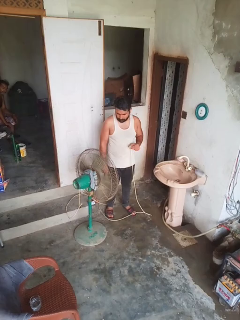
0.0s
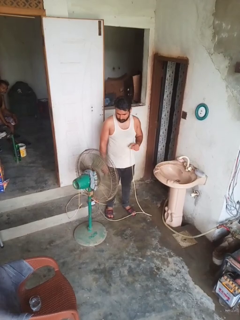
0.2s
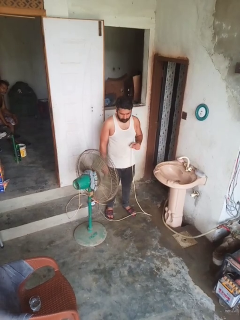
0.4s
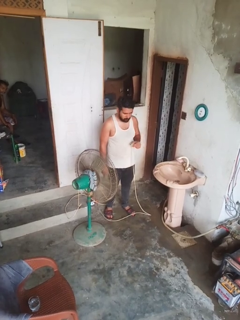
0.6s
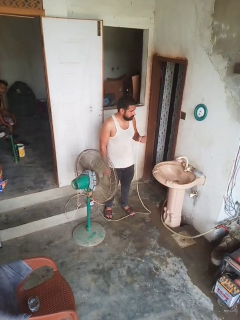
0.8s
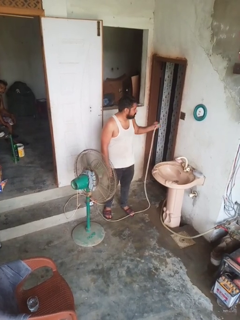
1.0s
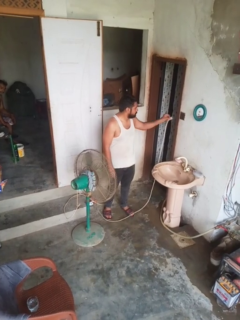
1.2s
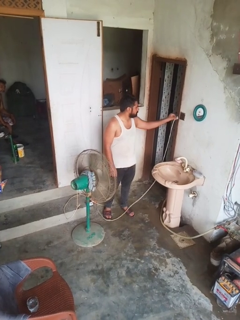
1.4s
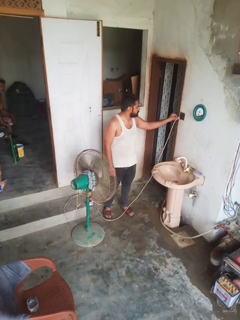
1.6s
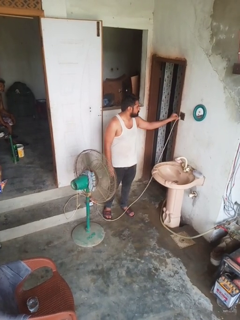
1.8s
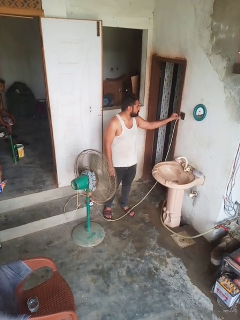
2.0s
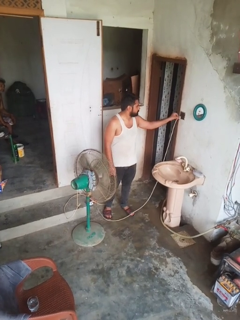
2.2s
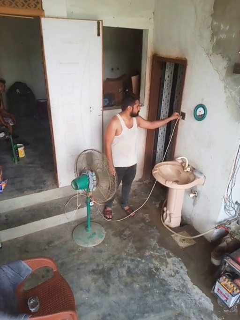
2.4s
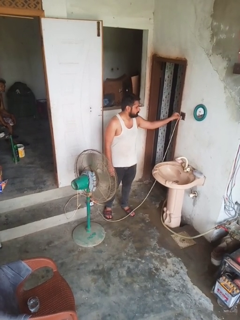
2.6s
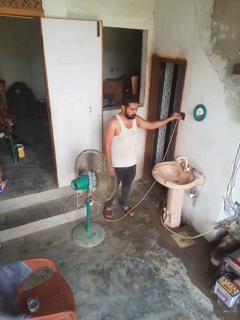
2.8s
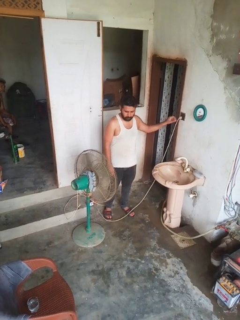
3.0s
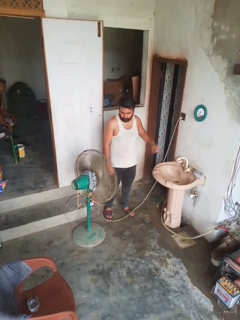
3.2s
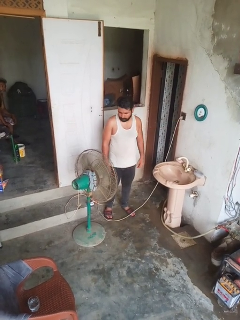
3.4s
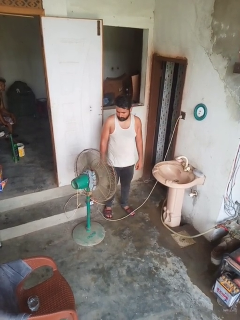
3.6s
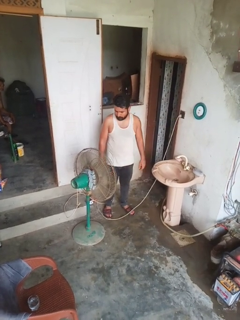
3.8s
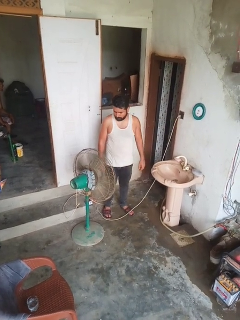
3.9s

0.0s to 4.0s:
person turns on fan

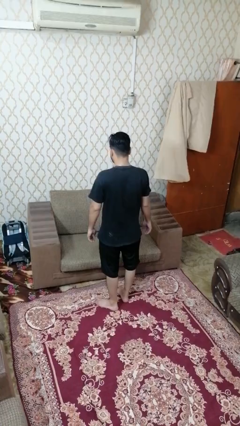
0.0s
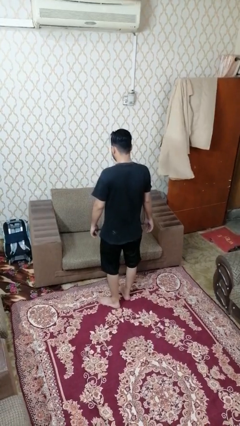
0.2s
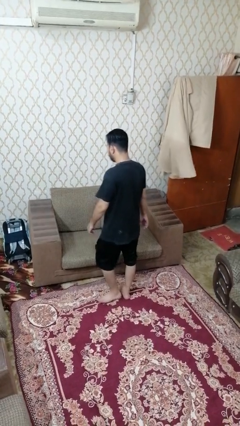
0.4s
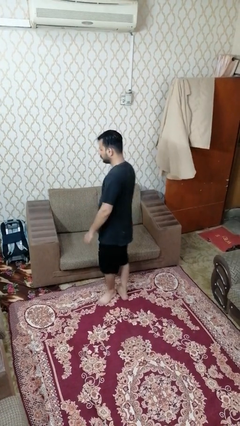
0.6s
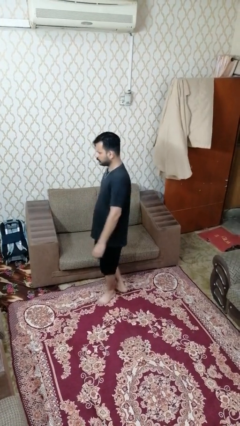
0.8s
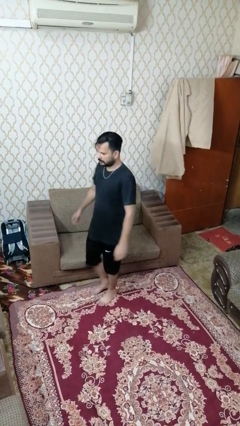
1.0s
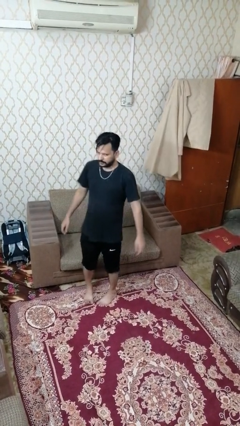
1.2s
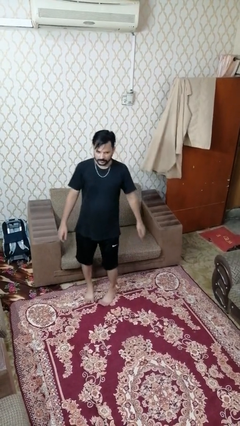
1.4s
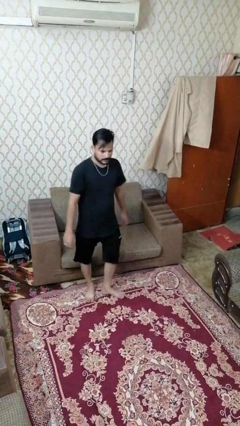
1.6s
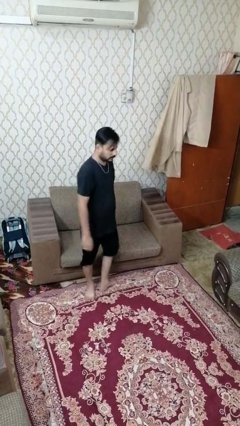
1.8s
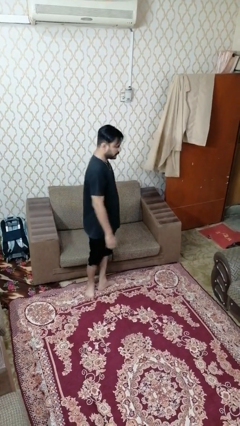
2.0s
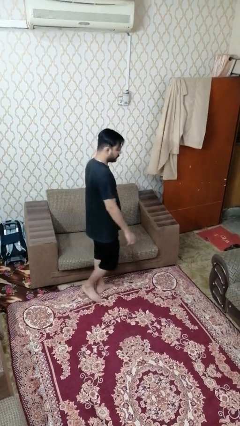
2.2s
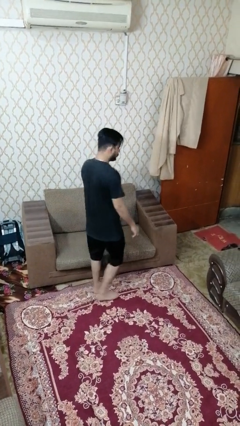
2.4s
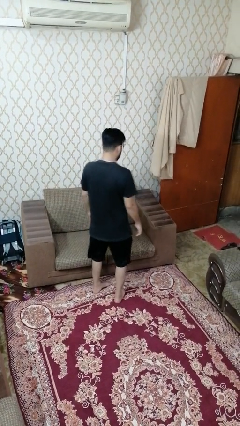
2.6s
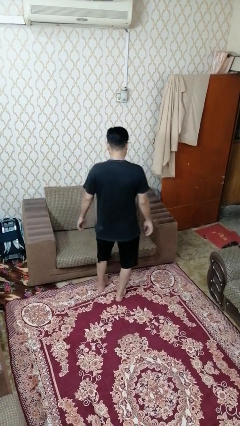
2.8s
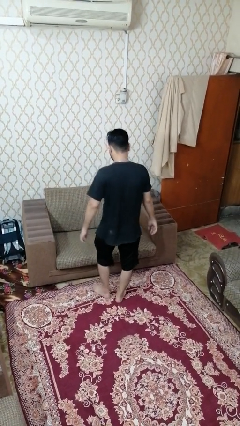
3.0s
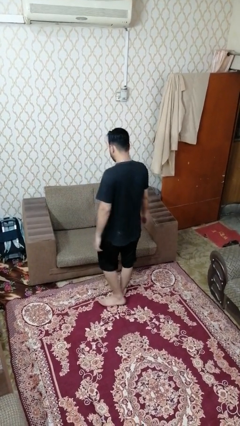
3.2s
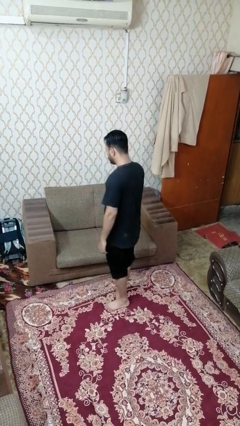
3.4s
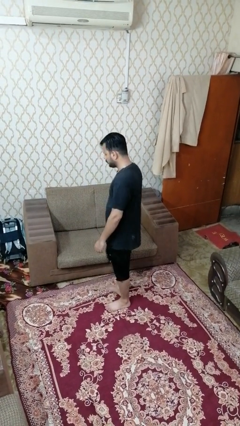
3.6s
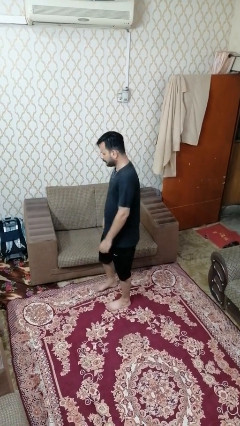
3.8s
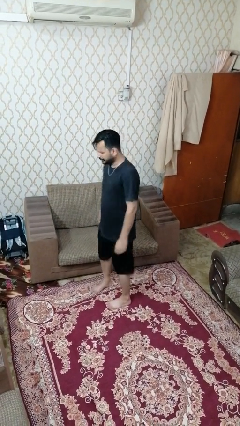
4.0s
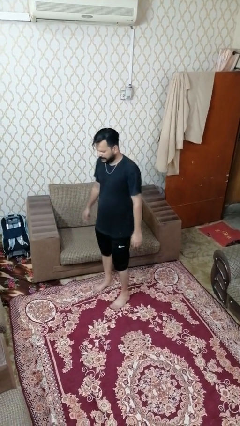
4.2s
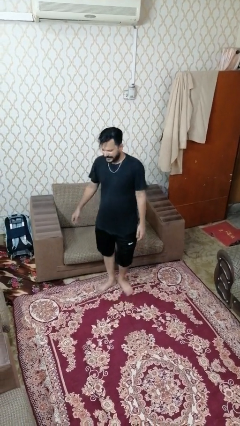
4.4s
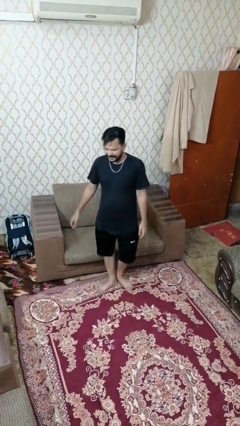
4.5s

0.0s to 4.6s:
person twirls

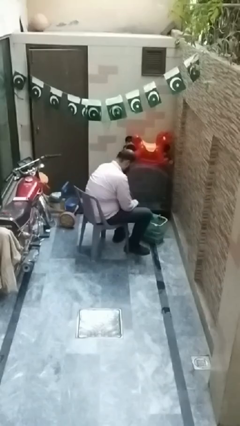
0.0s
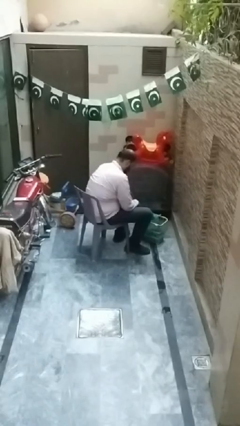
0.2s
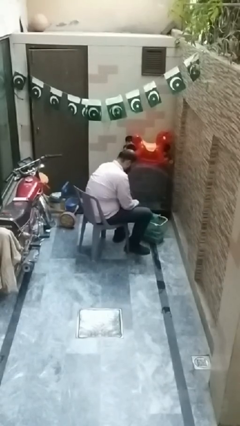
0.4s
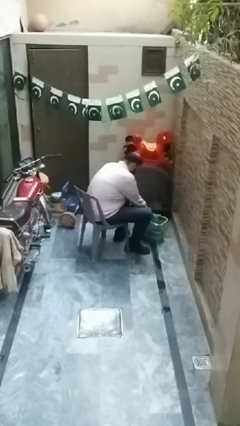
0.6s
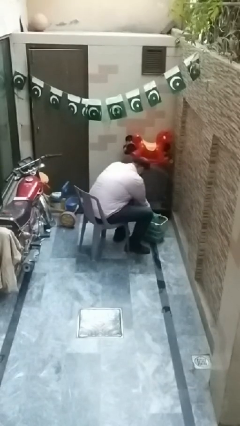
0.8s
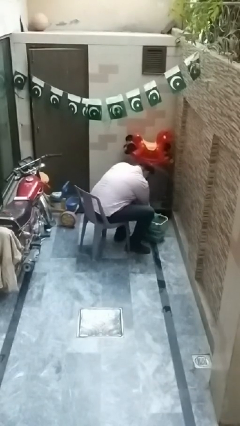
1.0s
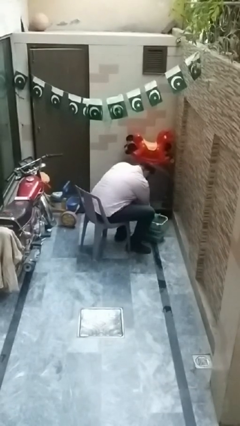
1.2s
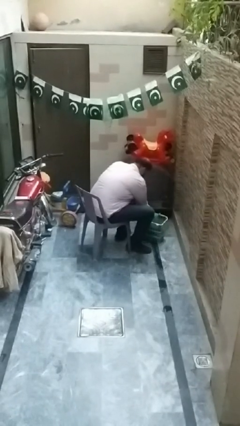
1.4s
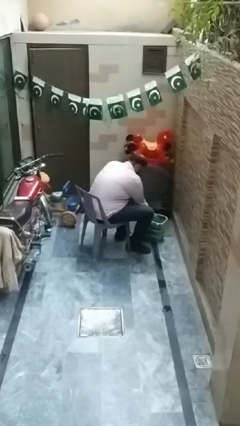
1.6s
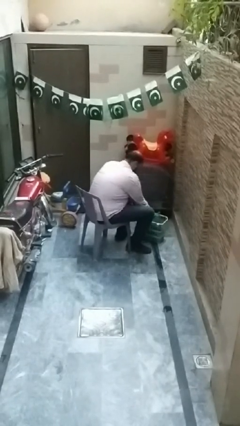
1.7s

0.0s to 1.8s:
person takes object from basket

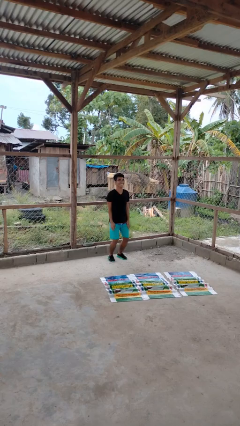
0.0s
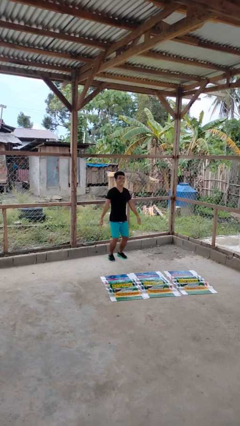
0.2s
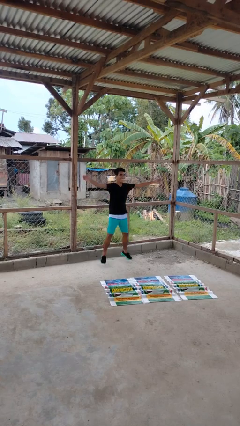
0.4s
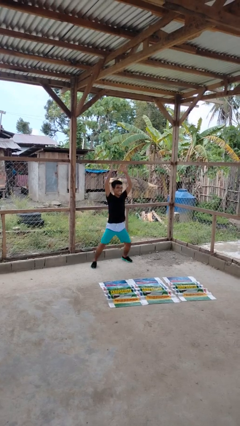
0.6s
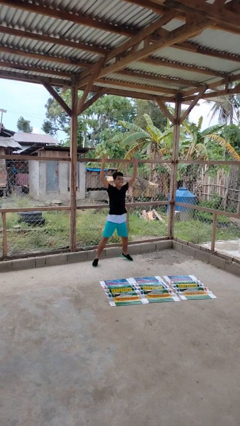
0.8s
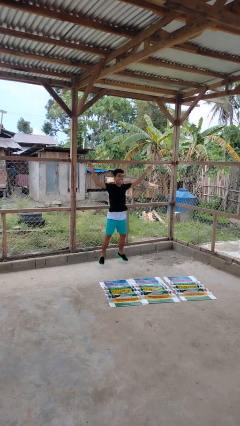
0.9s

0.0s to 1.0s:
person exercises with jumping jacks

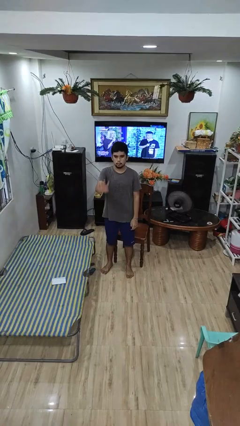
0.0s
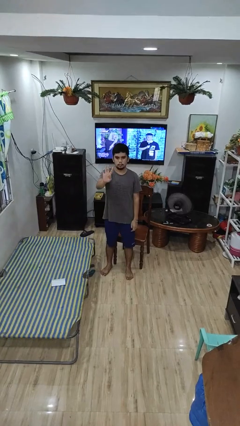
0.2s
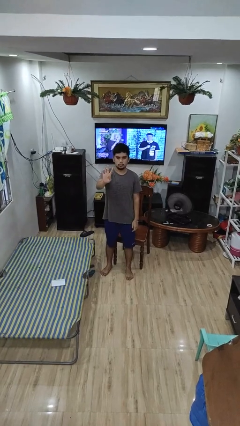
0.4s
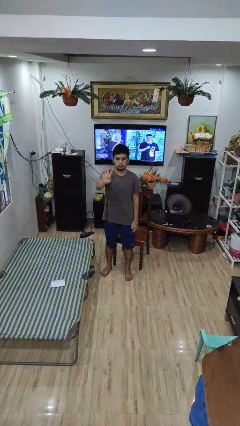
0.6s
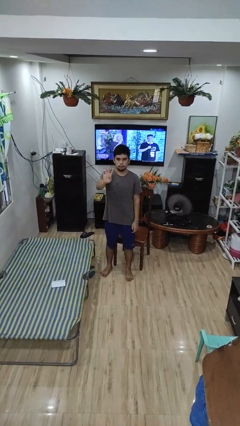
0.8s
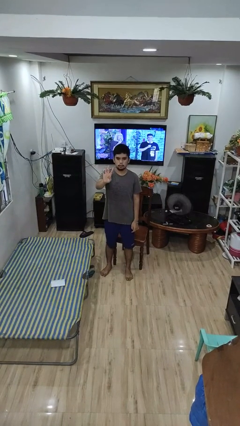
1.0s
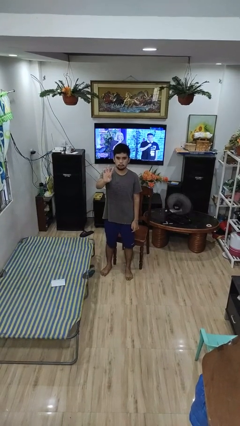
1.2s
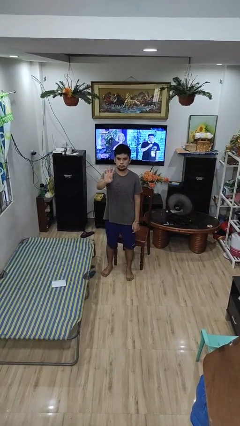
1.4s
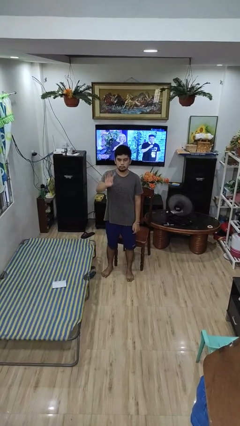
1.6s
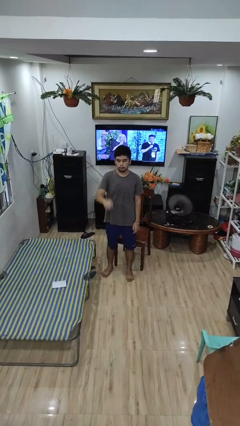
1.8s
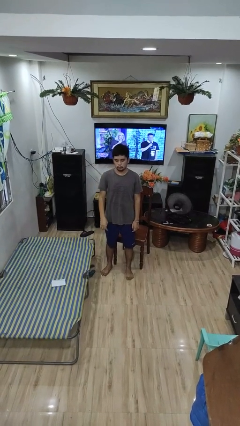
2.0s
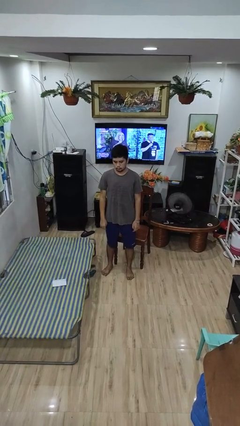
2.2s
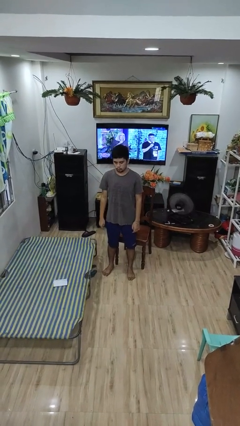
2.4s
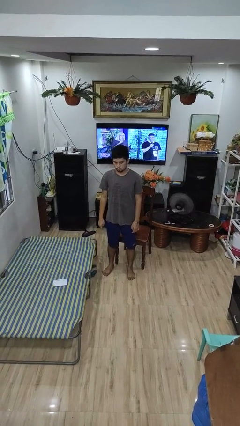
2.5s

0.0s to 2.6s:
person gestures number four

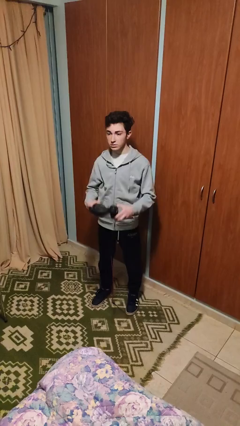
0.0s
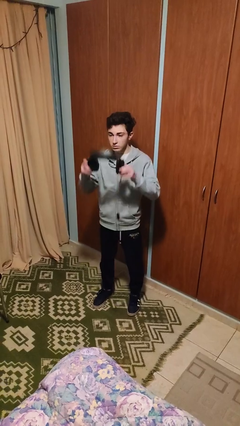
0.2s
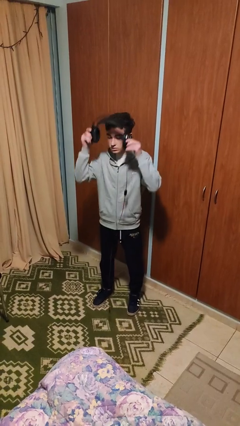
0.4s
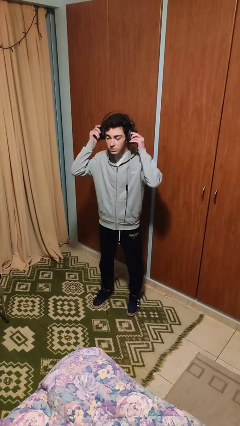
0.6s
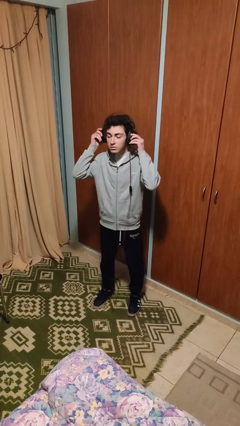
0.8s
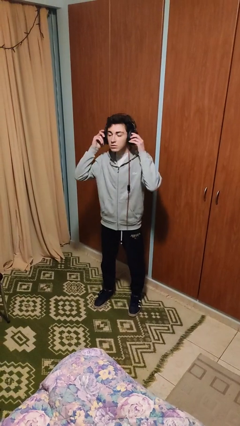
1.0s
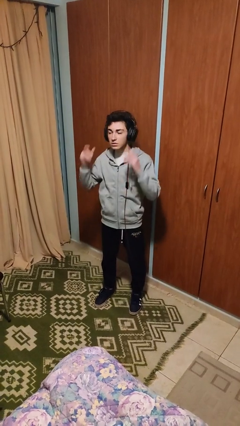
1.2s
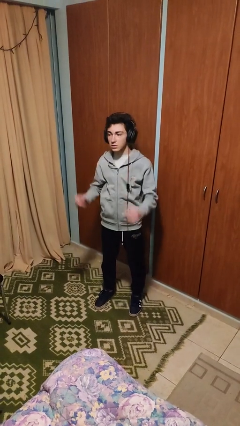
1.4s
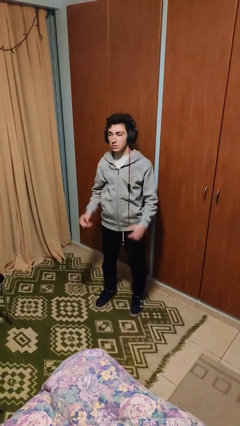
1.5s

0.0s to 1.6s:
person puts on headphones

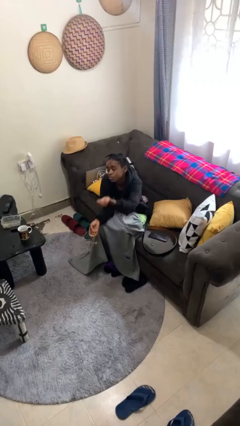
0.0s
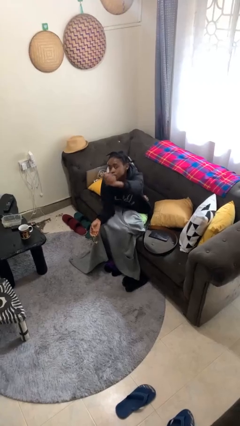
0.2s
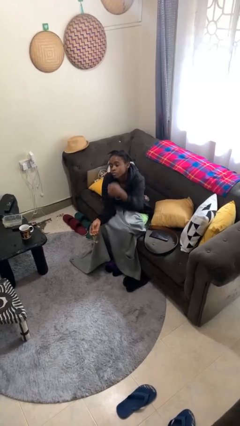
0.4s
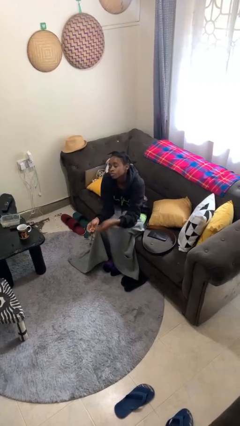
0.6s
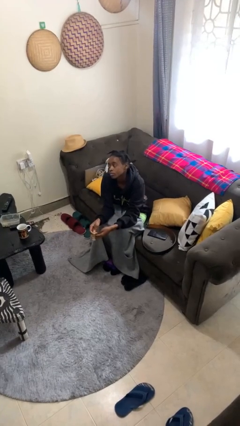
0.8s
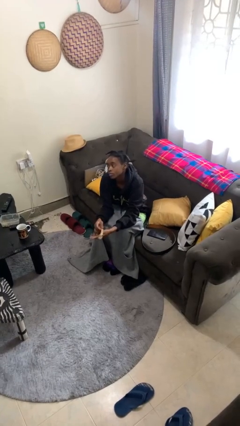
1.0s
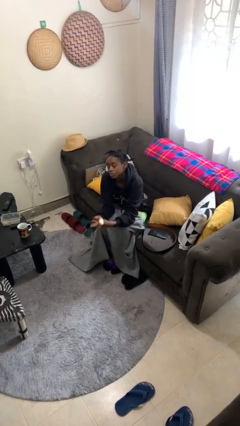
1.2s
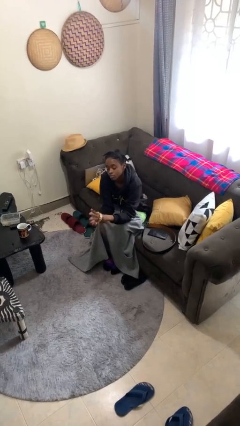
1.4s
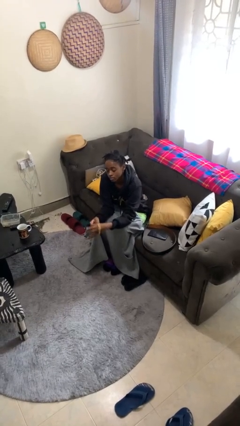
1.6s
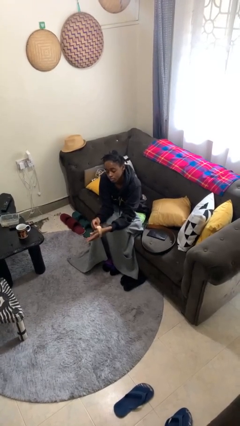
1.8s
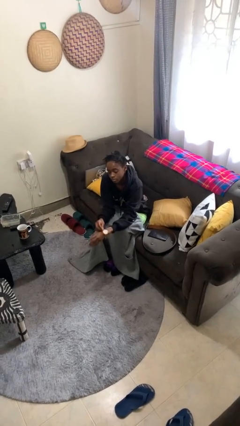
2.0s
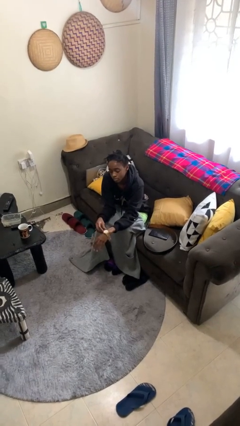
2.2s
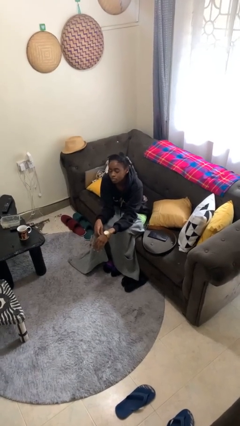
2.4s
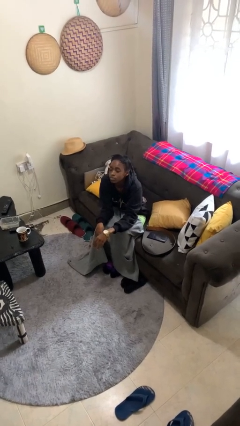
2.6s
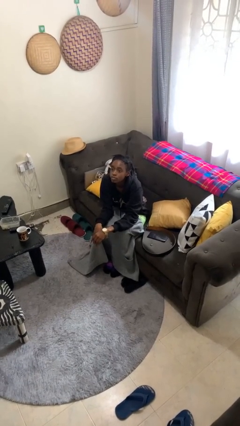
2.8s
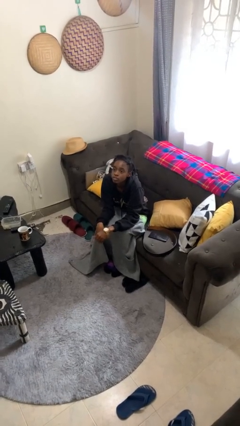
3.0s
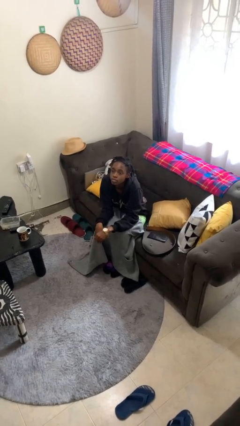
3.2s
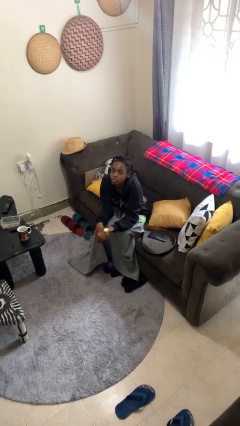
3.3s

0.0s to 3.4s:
person puts on wristwatch
